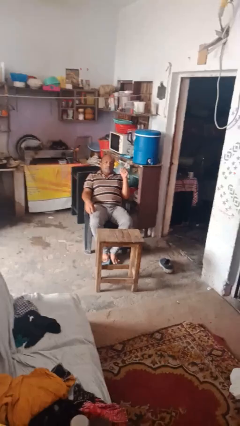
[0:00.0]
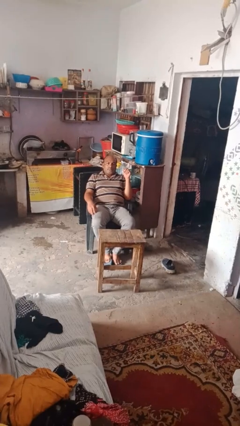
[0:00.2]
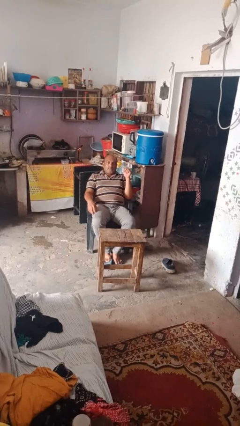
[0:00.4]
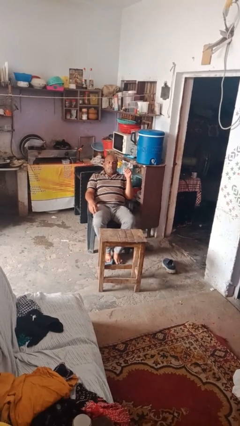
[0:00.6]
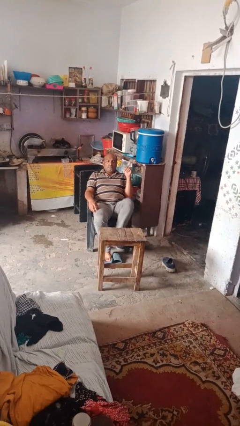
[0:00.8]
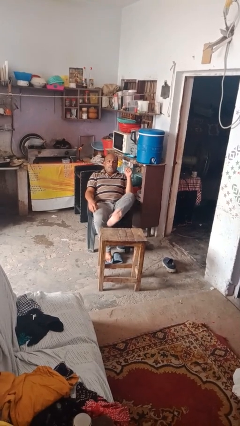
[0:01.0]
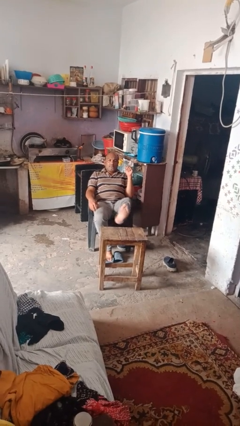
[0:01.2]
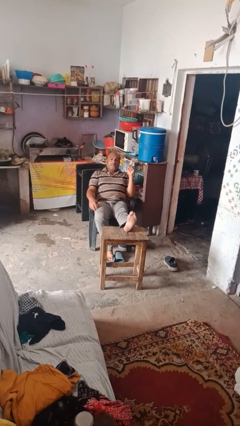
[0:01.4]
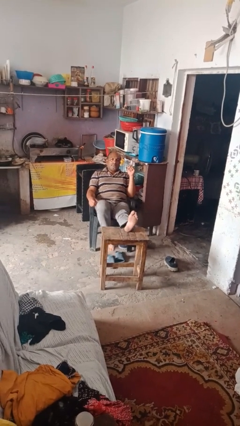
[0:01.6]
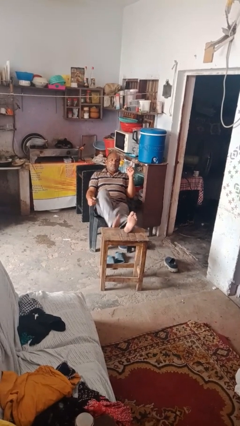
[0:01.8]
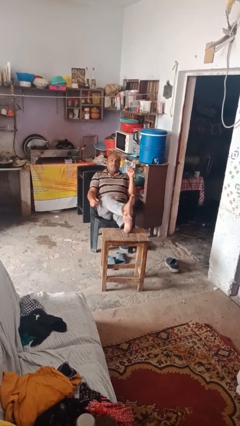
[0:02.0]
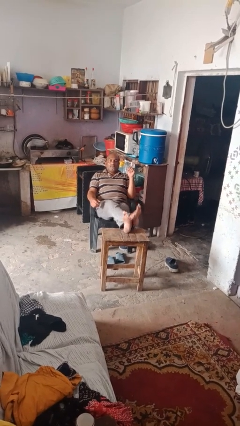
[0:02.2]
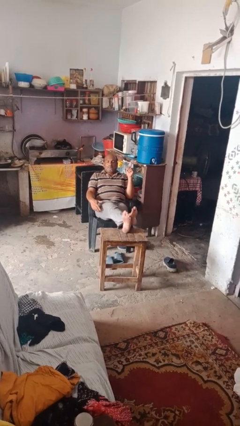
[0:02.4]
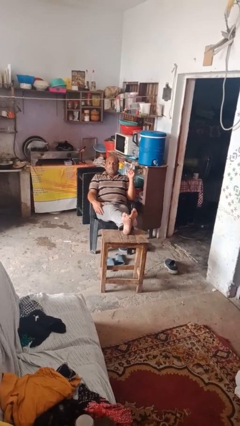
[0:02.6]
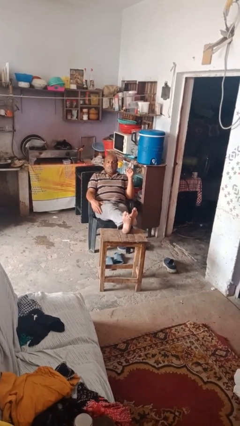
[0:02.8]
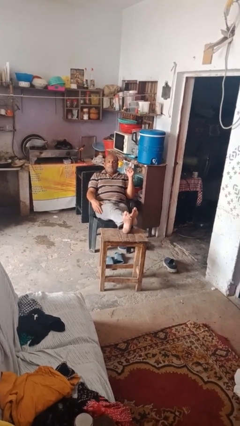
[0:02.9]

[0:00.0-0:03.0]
person puts feet up

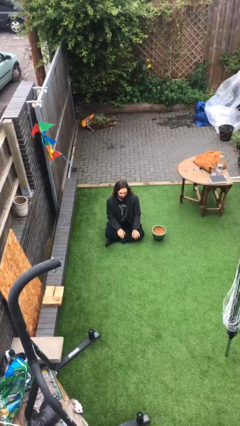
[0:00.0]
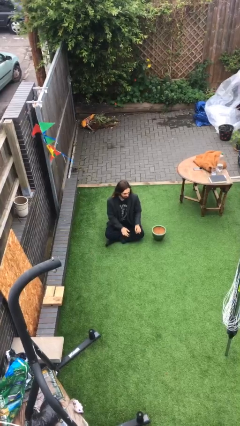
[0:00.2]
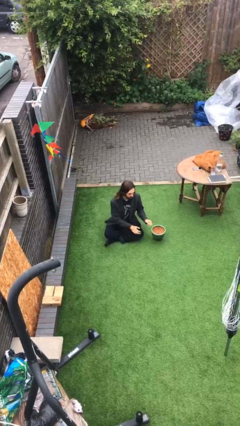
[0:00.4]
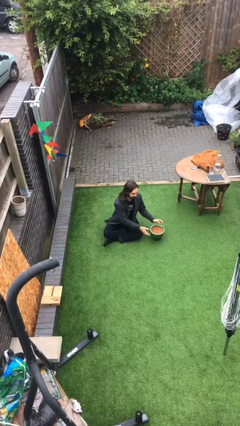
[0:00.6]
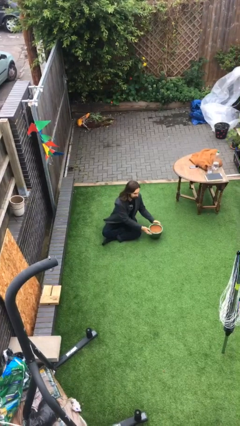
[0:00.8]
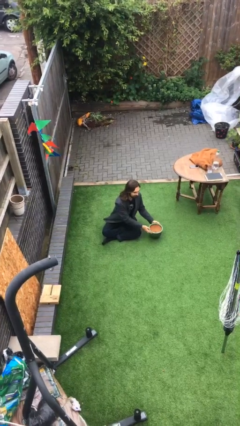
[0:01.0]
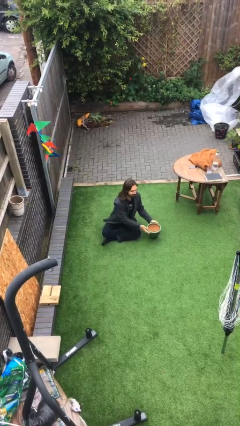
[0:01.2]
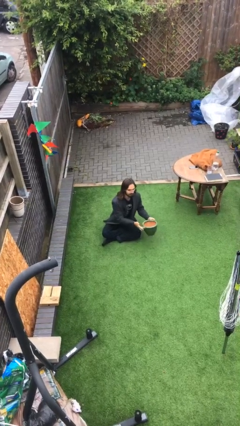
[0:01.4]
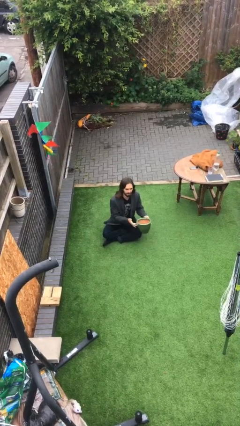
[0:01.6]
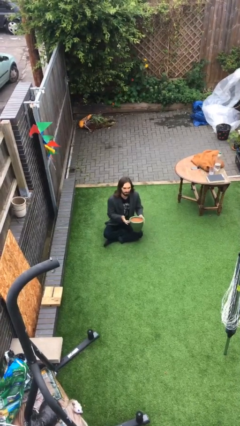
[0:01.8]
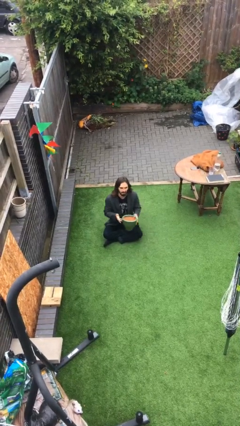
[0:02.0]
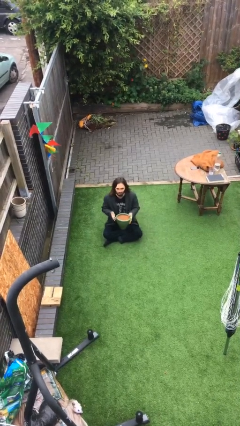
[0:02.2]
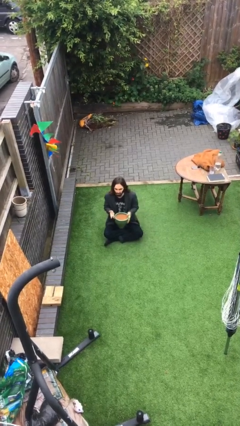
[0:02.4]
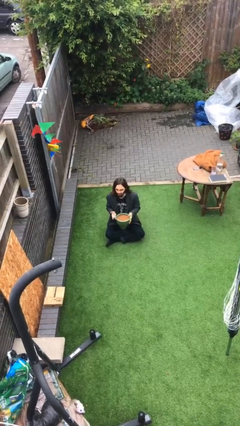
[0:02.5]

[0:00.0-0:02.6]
person picks up object from floor

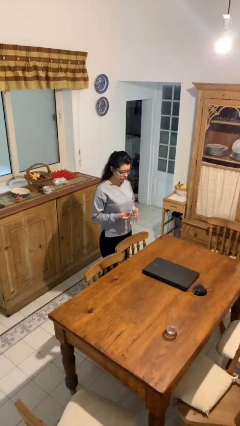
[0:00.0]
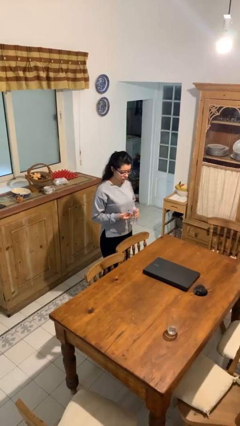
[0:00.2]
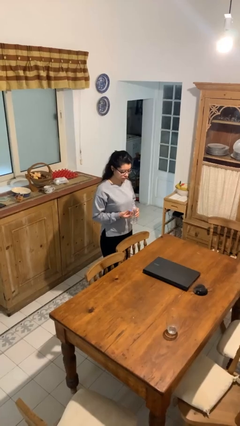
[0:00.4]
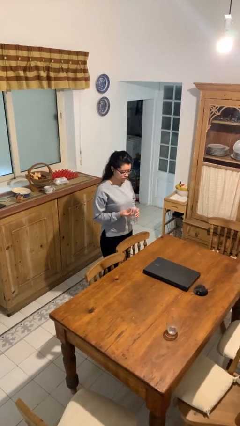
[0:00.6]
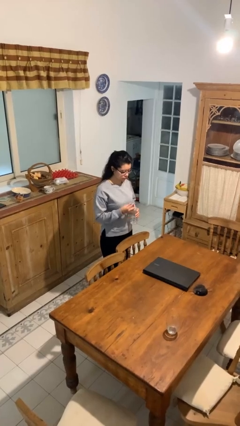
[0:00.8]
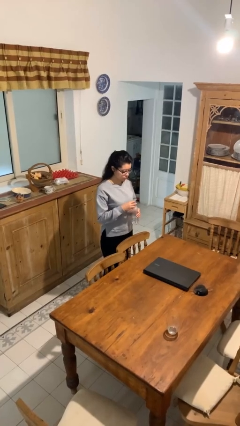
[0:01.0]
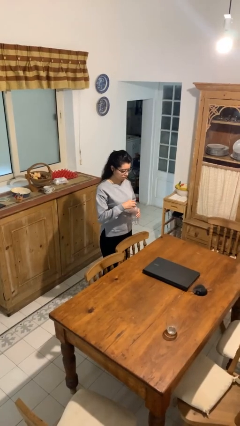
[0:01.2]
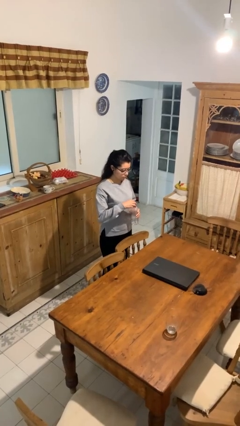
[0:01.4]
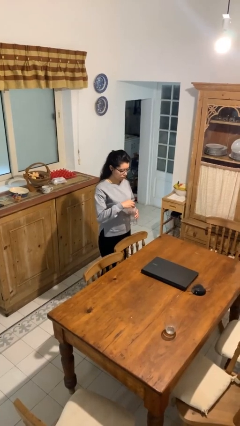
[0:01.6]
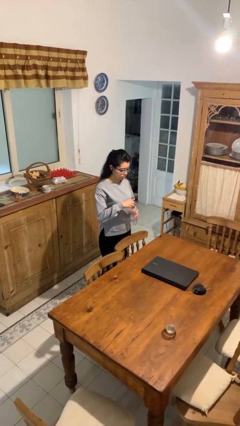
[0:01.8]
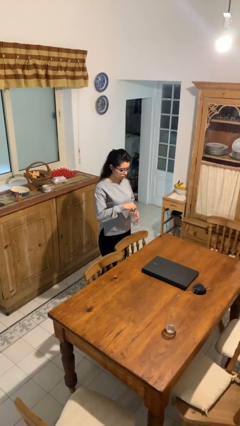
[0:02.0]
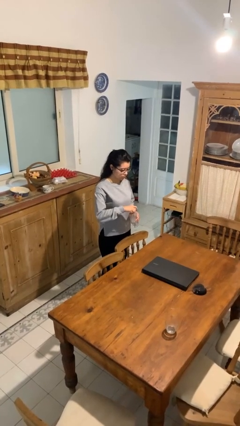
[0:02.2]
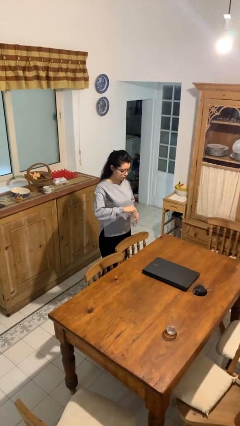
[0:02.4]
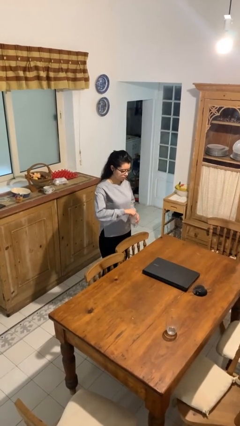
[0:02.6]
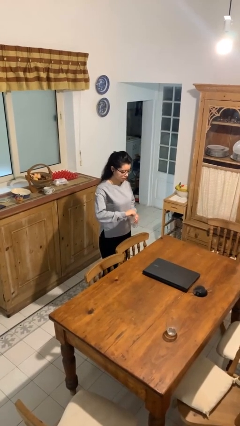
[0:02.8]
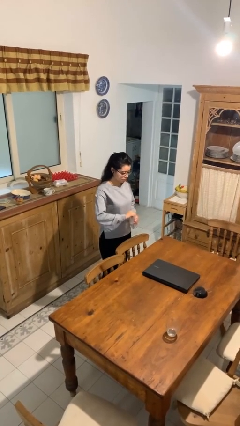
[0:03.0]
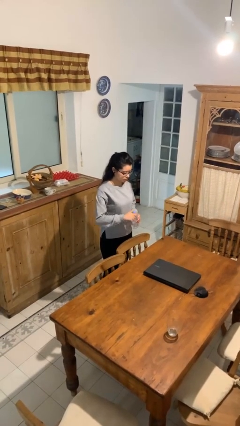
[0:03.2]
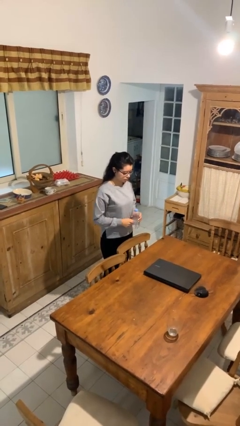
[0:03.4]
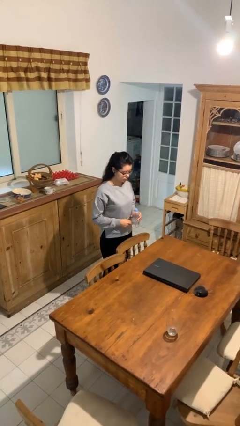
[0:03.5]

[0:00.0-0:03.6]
person screws lid to bottle

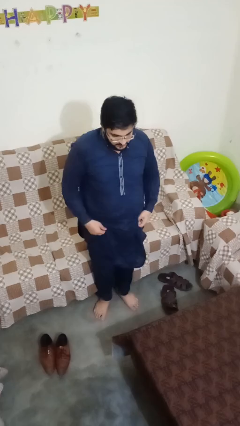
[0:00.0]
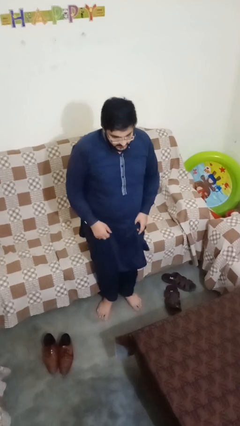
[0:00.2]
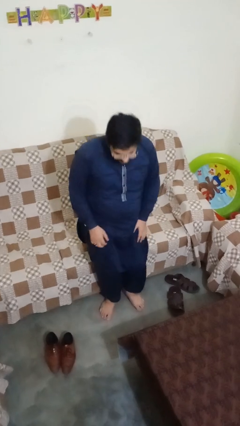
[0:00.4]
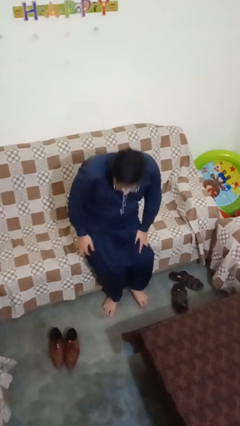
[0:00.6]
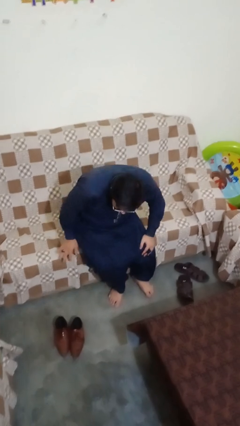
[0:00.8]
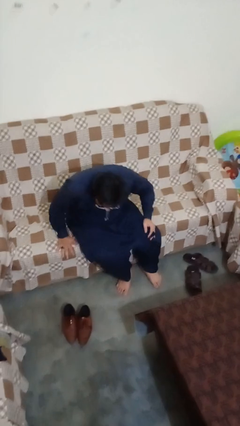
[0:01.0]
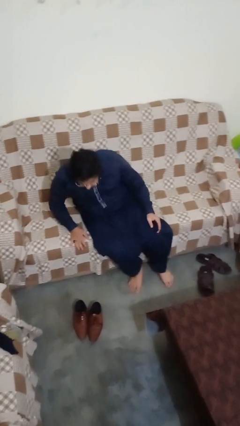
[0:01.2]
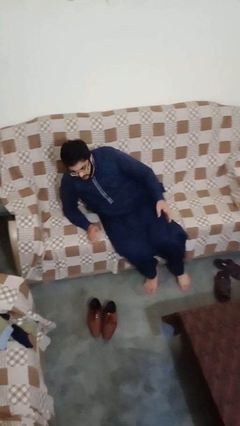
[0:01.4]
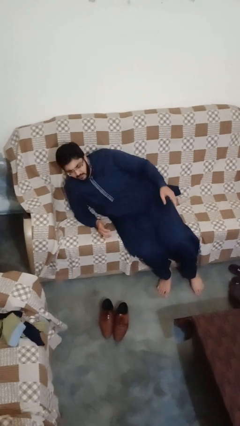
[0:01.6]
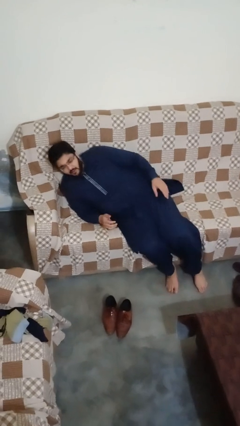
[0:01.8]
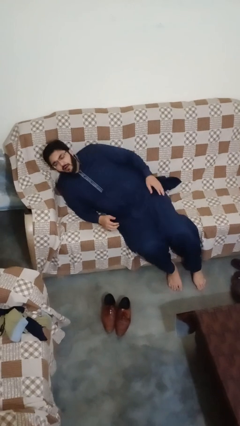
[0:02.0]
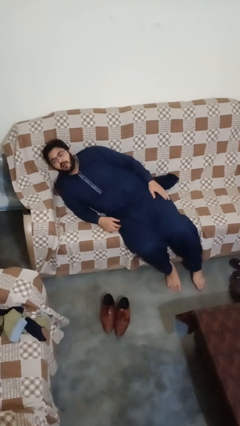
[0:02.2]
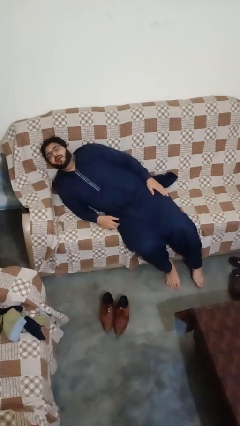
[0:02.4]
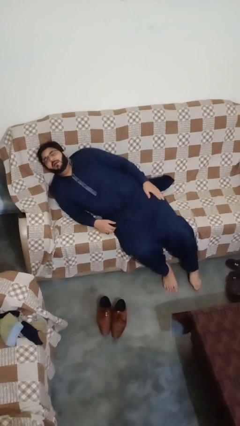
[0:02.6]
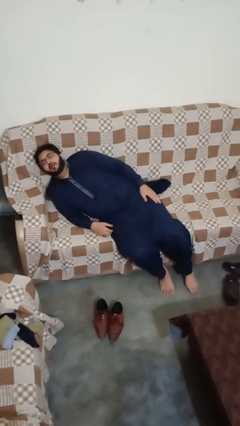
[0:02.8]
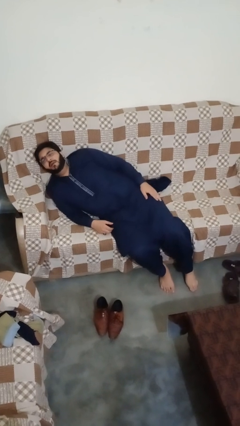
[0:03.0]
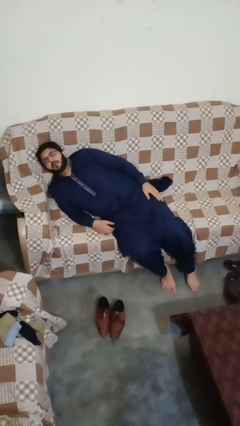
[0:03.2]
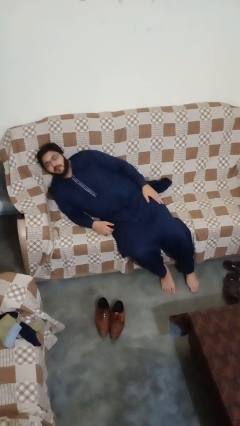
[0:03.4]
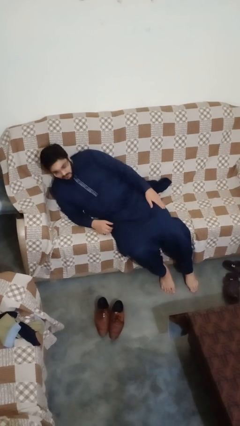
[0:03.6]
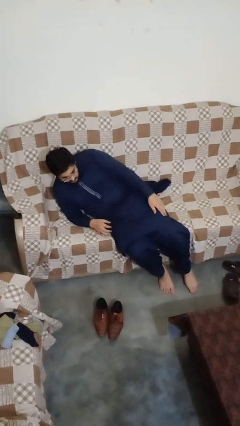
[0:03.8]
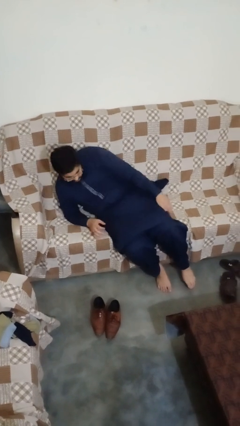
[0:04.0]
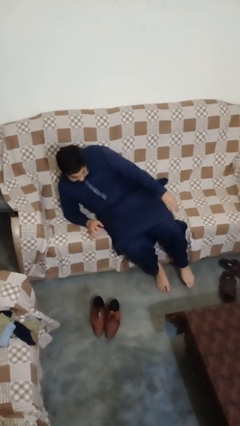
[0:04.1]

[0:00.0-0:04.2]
person lies down on couch

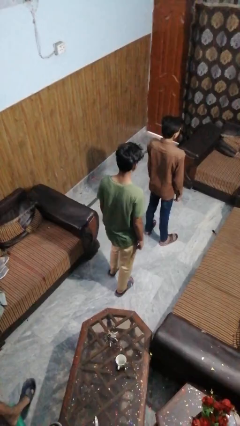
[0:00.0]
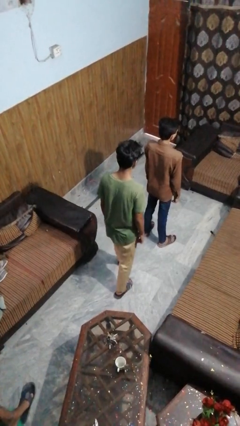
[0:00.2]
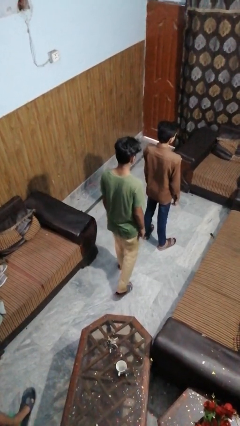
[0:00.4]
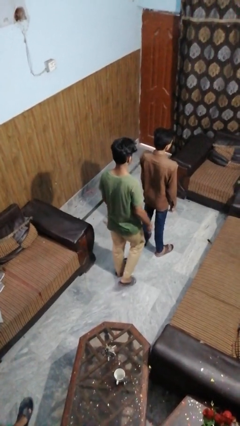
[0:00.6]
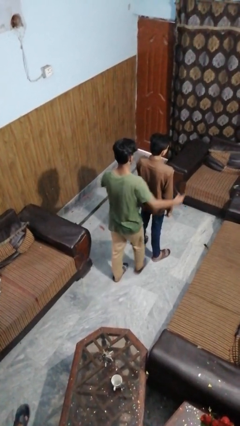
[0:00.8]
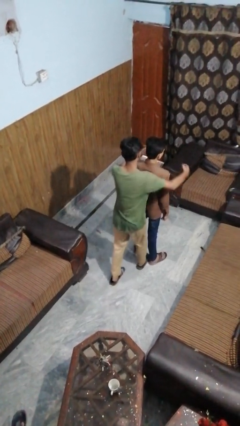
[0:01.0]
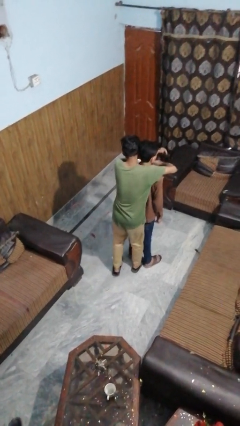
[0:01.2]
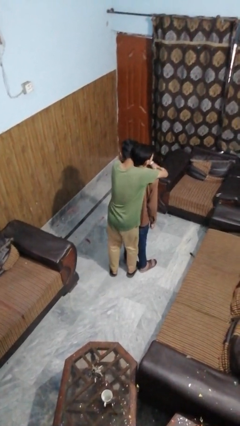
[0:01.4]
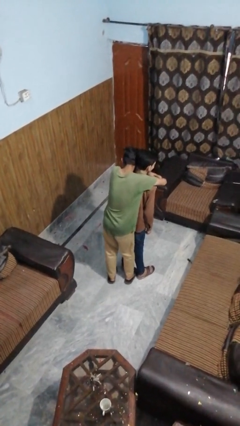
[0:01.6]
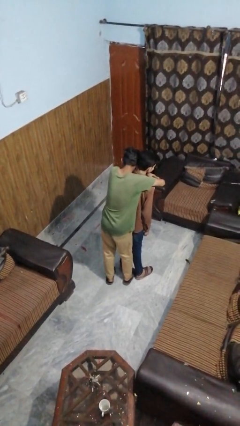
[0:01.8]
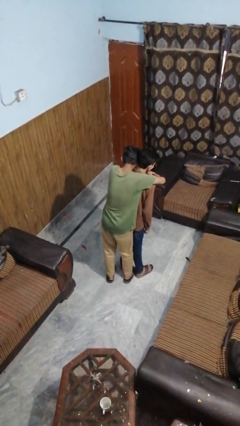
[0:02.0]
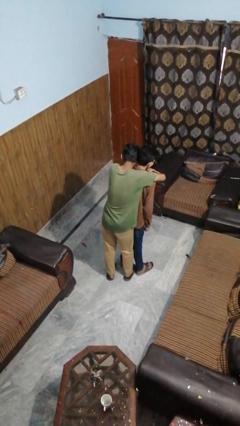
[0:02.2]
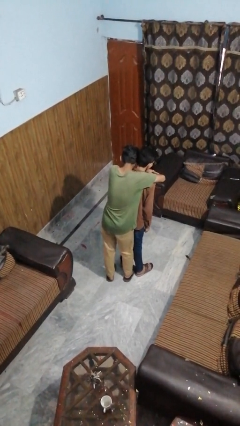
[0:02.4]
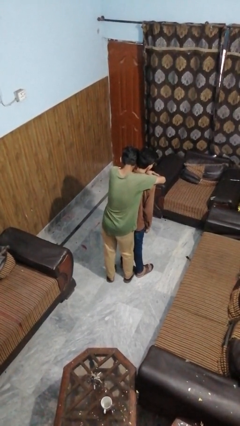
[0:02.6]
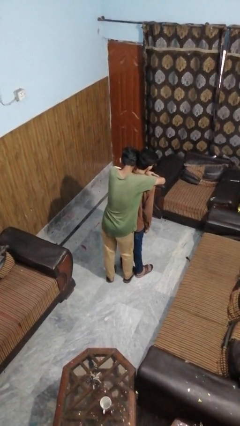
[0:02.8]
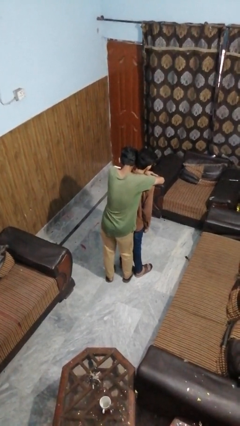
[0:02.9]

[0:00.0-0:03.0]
person hugs person from behind

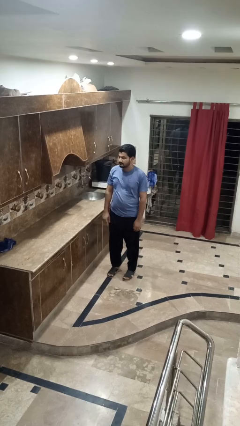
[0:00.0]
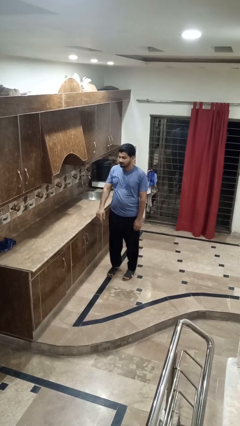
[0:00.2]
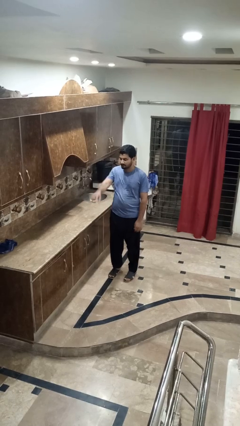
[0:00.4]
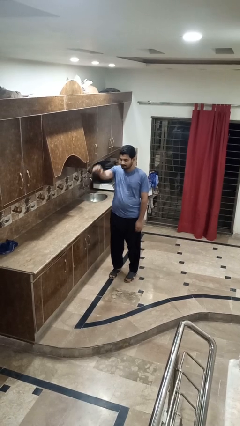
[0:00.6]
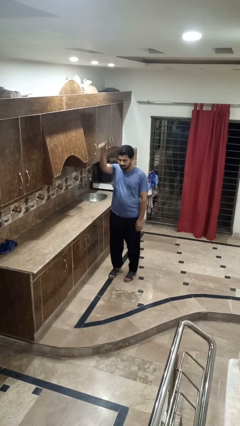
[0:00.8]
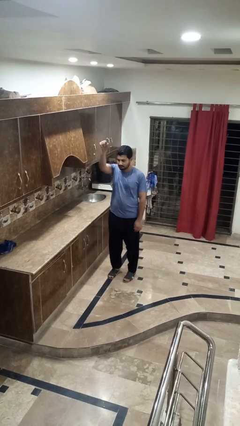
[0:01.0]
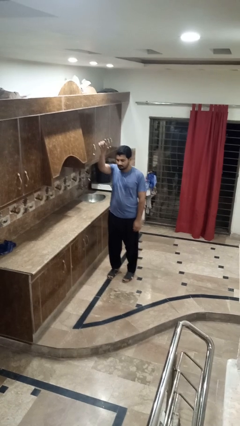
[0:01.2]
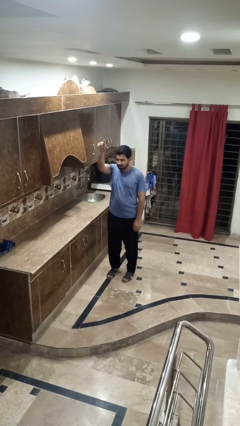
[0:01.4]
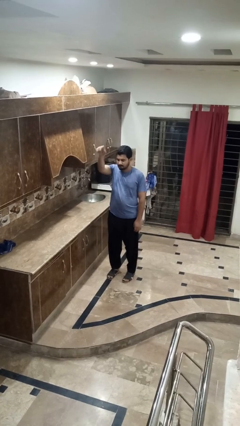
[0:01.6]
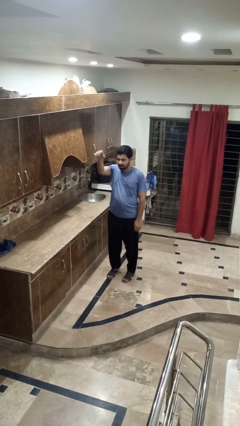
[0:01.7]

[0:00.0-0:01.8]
person gestures swipe up
